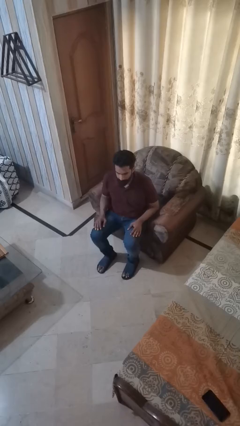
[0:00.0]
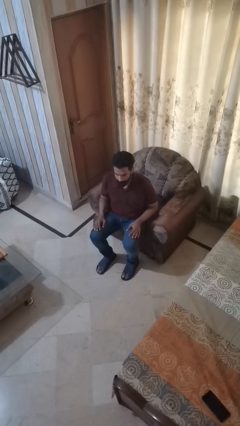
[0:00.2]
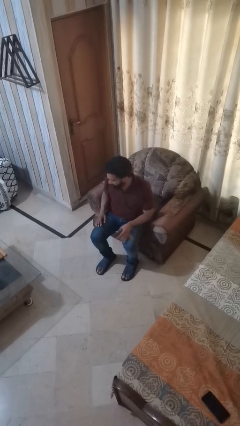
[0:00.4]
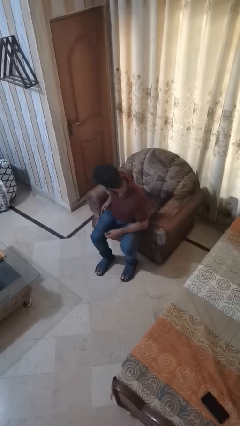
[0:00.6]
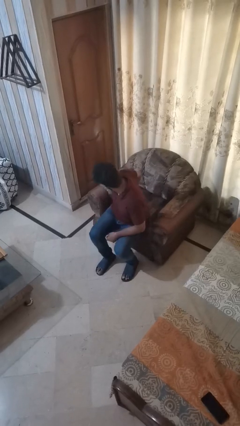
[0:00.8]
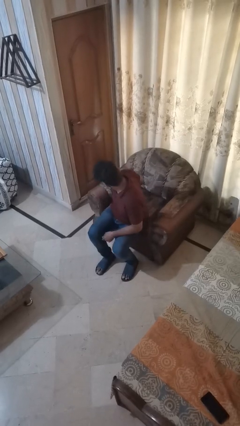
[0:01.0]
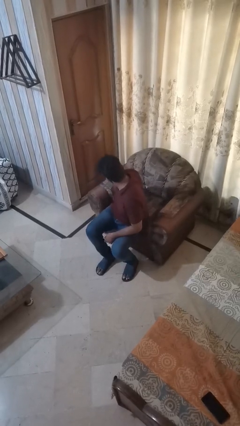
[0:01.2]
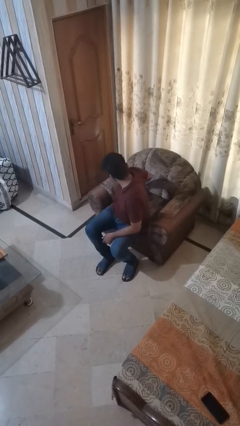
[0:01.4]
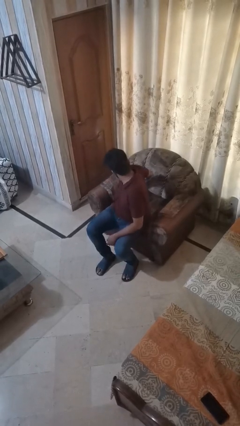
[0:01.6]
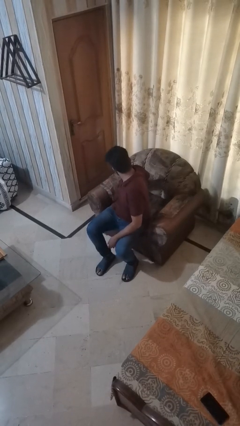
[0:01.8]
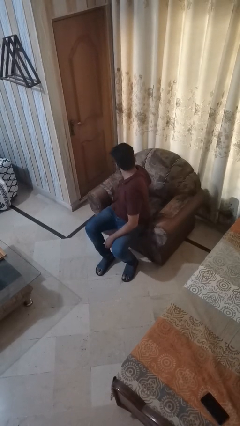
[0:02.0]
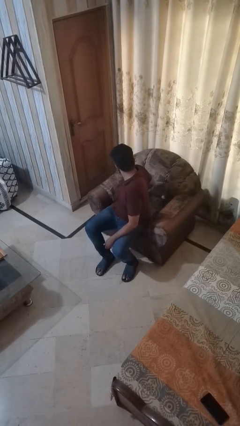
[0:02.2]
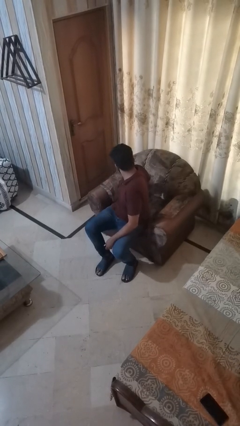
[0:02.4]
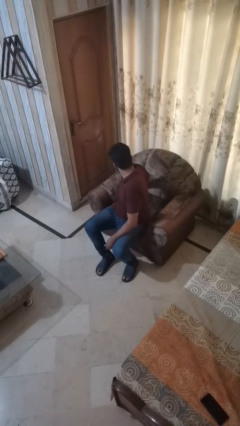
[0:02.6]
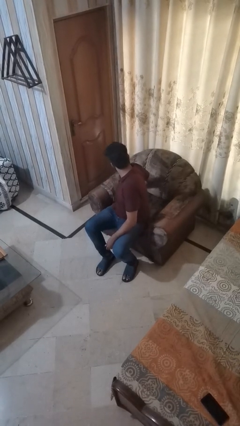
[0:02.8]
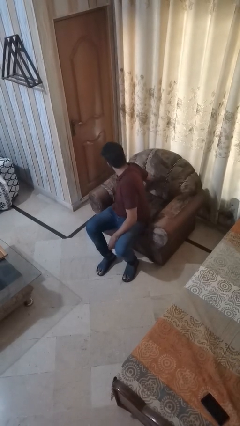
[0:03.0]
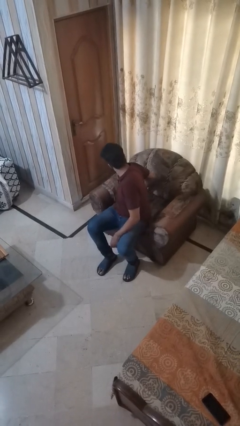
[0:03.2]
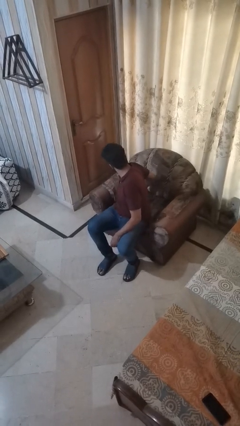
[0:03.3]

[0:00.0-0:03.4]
person searches under couch

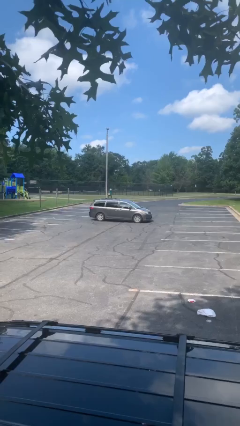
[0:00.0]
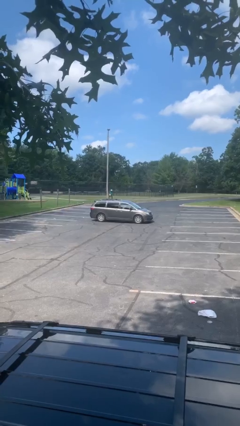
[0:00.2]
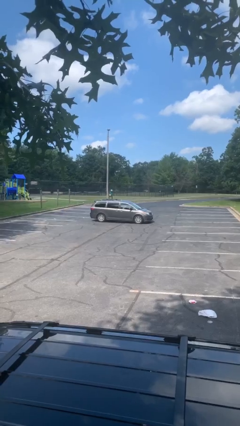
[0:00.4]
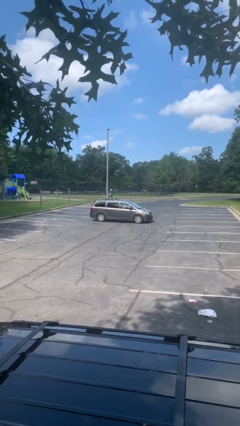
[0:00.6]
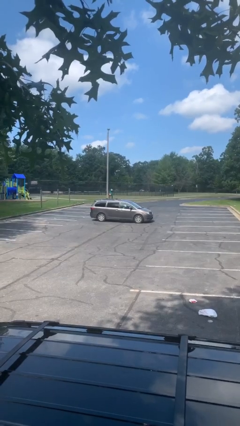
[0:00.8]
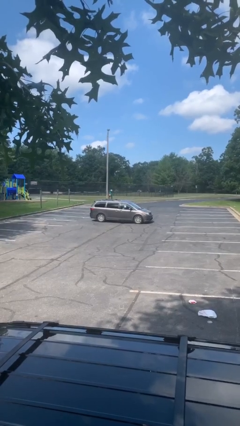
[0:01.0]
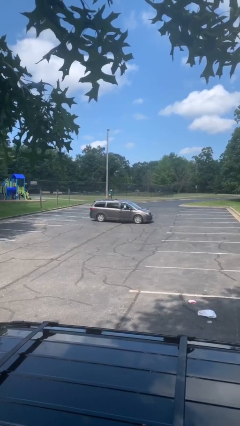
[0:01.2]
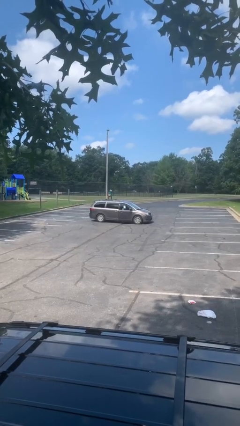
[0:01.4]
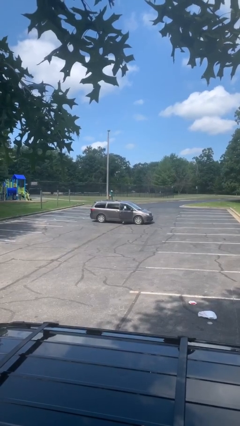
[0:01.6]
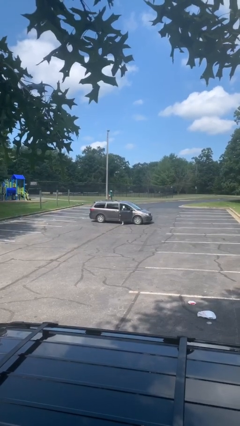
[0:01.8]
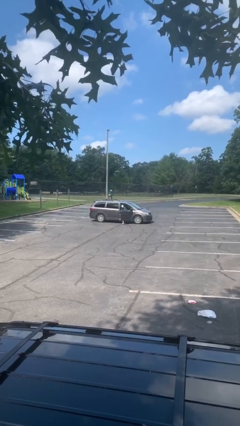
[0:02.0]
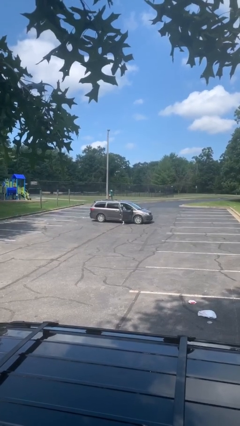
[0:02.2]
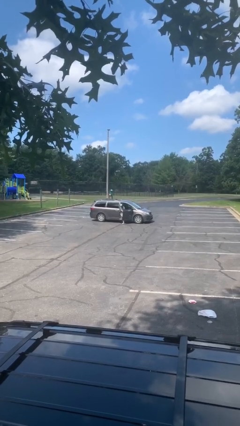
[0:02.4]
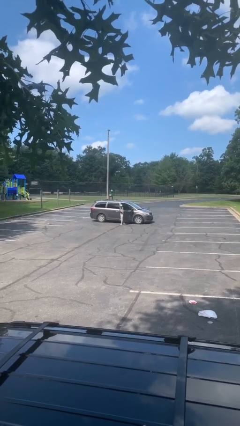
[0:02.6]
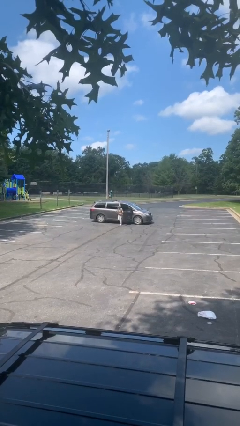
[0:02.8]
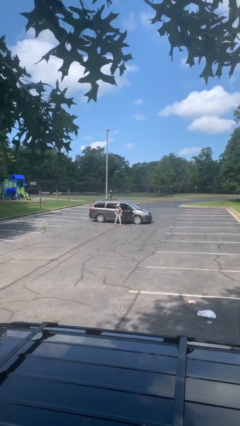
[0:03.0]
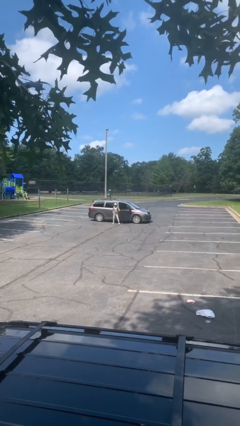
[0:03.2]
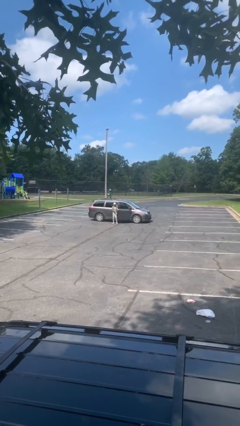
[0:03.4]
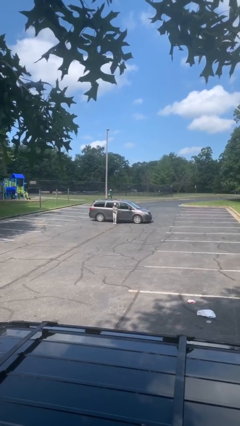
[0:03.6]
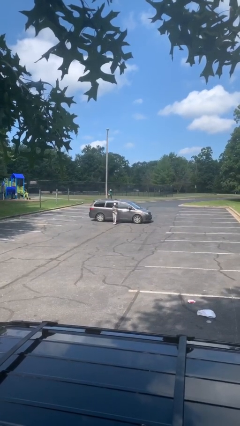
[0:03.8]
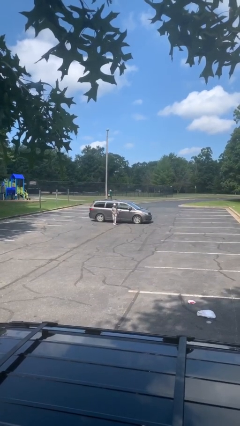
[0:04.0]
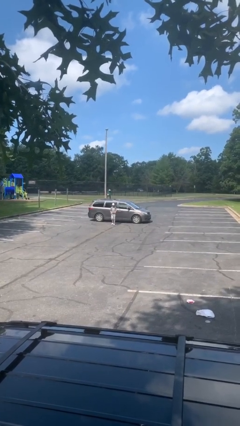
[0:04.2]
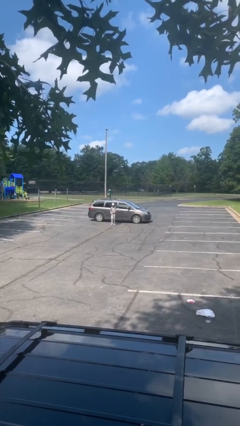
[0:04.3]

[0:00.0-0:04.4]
car drops off person

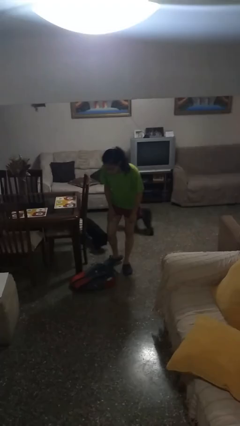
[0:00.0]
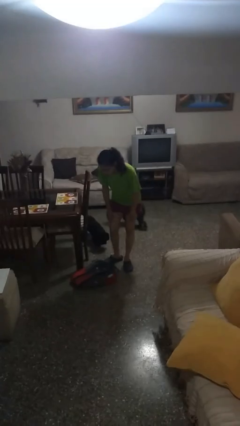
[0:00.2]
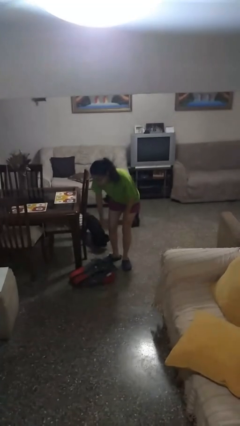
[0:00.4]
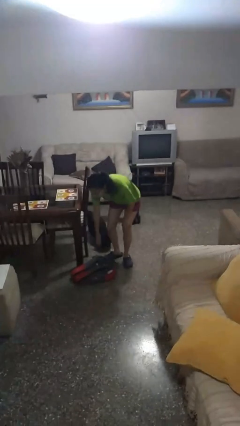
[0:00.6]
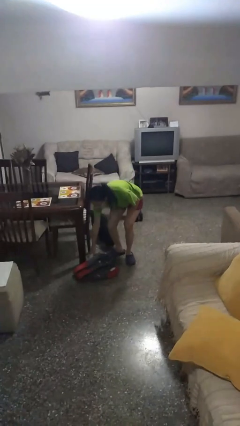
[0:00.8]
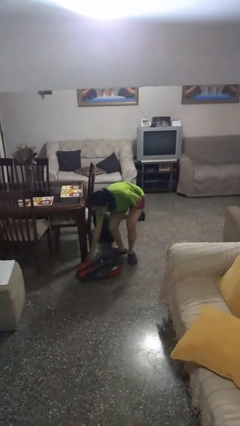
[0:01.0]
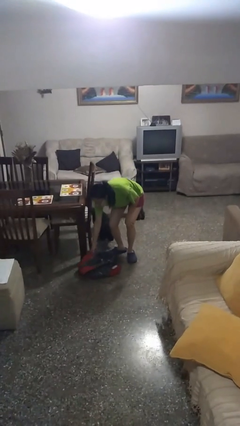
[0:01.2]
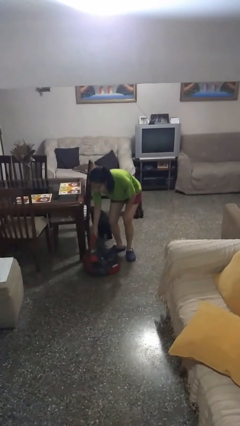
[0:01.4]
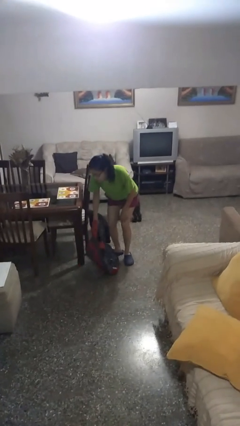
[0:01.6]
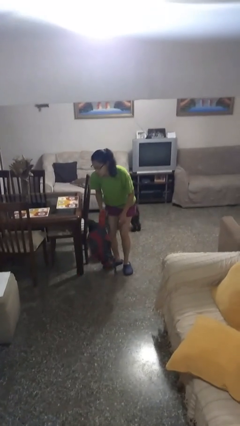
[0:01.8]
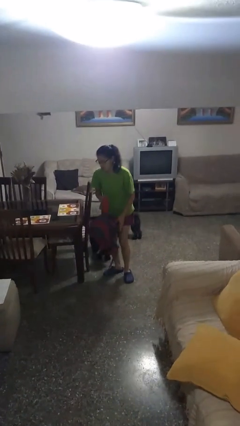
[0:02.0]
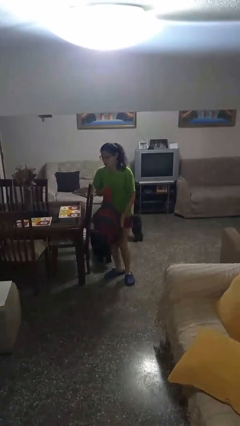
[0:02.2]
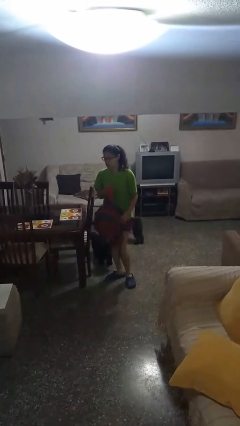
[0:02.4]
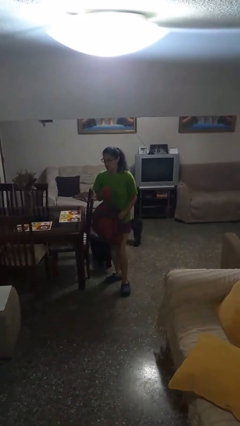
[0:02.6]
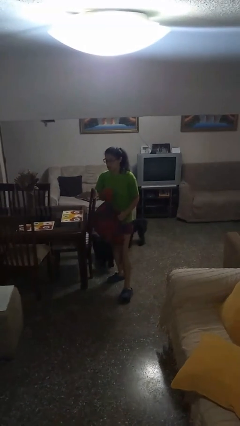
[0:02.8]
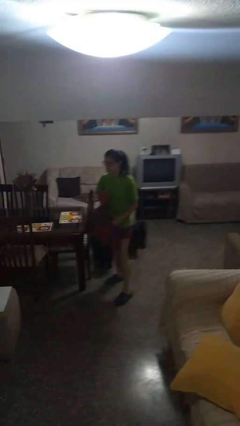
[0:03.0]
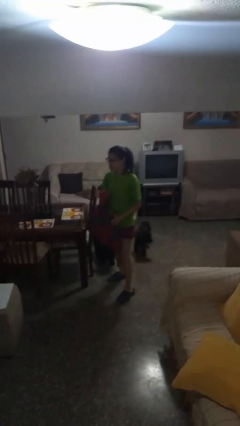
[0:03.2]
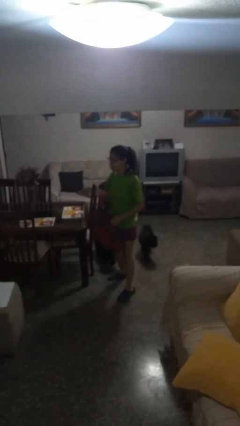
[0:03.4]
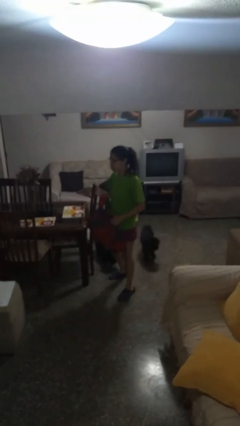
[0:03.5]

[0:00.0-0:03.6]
person picks up object from floor

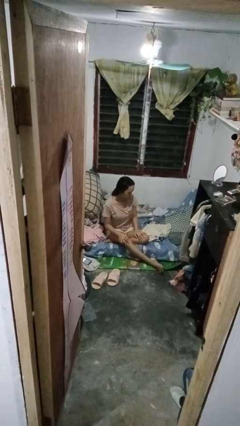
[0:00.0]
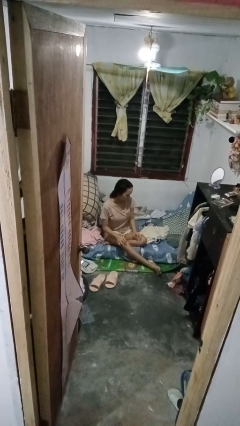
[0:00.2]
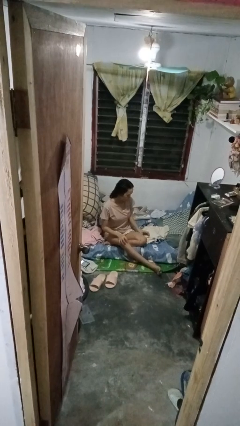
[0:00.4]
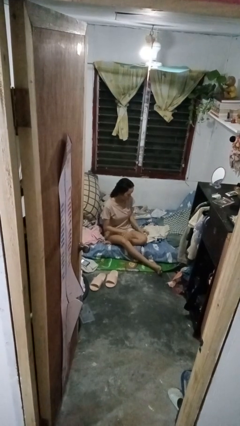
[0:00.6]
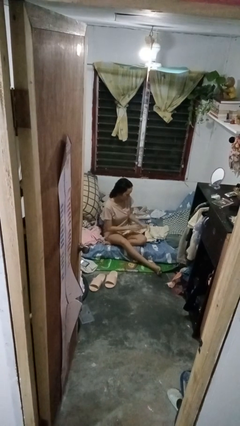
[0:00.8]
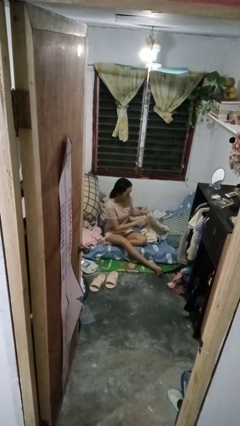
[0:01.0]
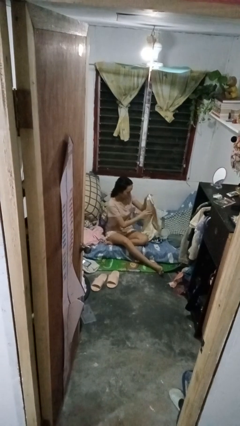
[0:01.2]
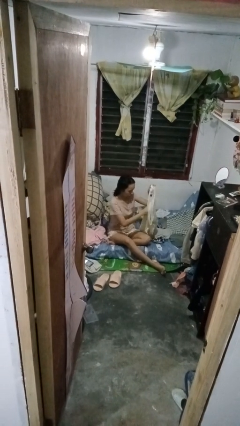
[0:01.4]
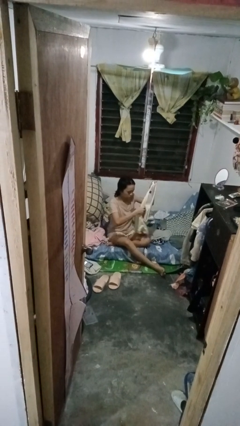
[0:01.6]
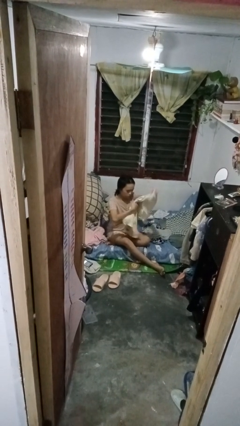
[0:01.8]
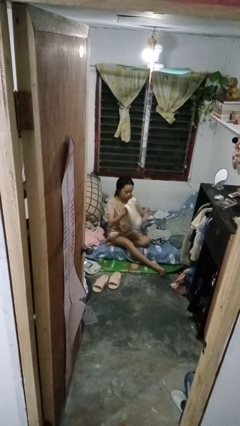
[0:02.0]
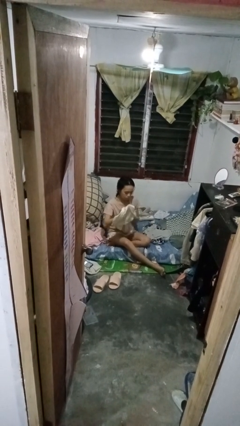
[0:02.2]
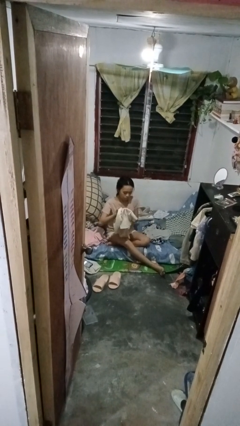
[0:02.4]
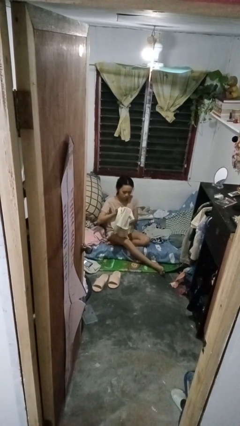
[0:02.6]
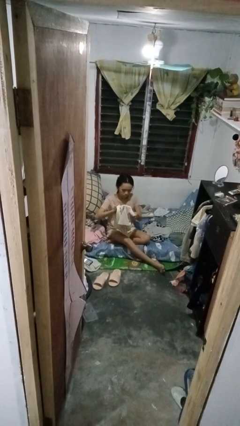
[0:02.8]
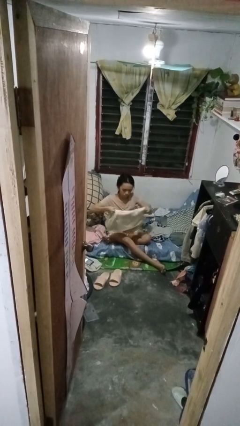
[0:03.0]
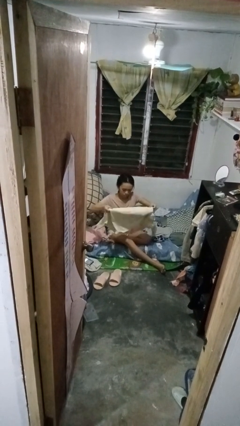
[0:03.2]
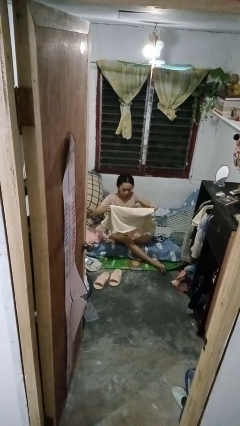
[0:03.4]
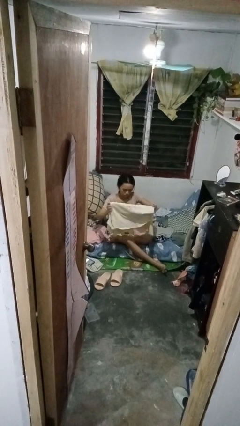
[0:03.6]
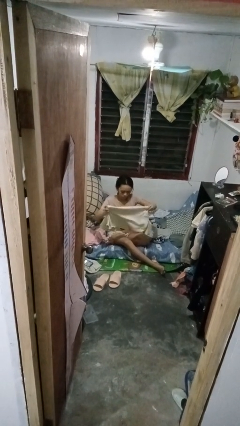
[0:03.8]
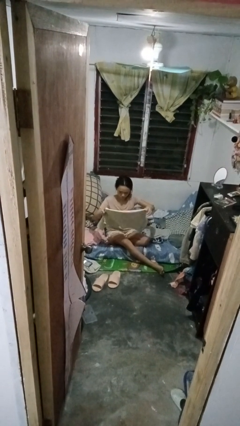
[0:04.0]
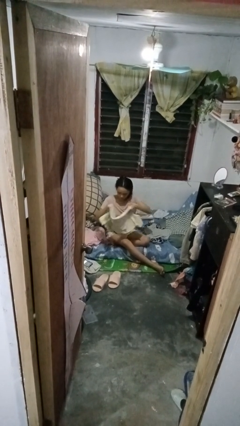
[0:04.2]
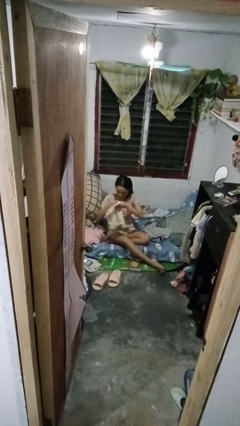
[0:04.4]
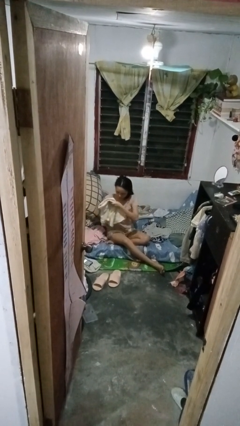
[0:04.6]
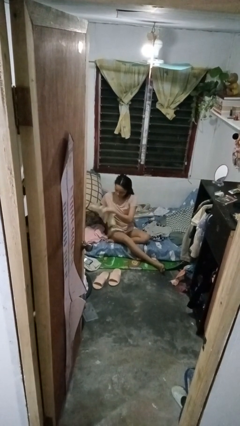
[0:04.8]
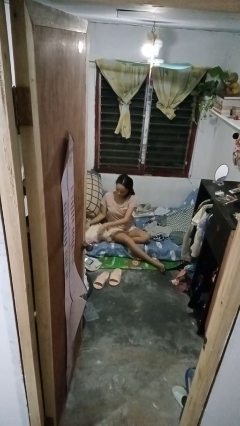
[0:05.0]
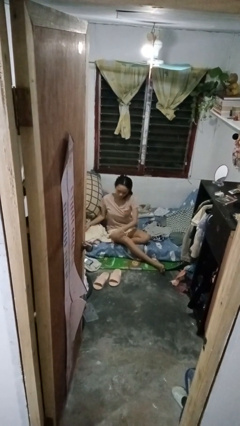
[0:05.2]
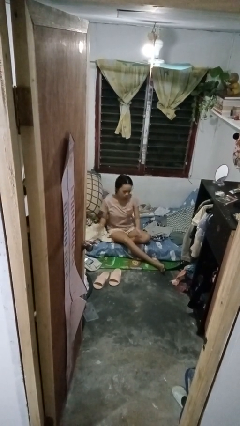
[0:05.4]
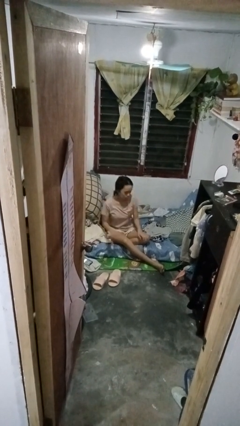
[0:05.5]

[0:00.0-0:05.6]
person folds shirt

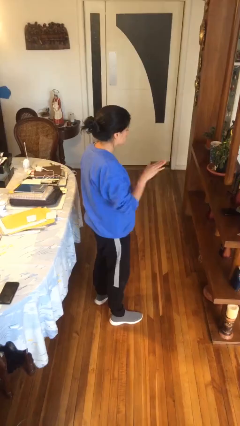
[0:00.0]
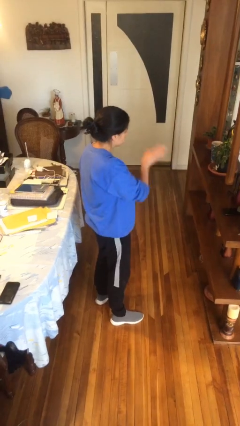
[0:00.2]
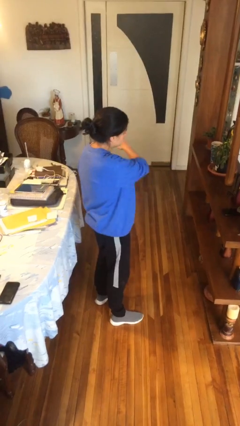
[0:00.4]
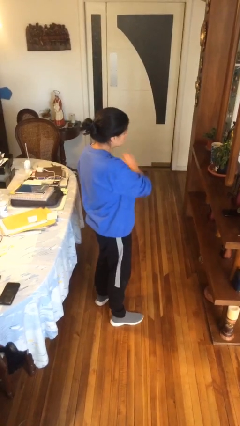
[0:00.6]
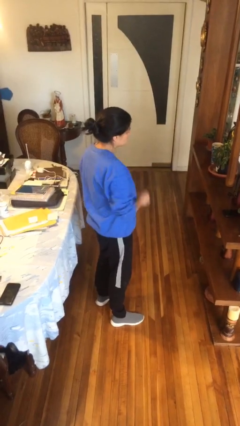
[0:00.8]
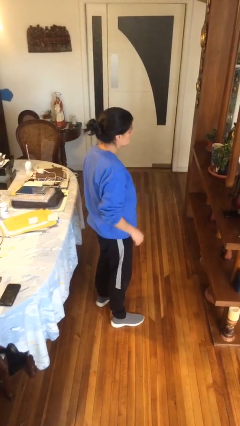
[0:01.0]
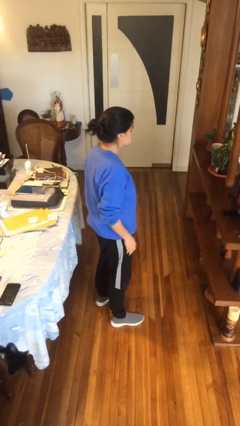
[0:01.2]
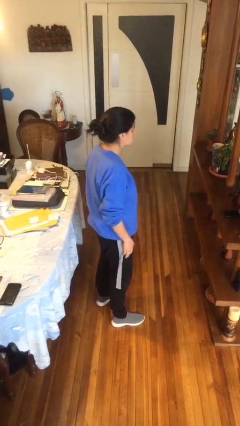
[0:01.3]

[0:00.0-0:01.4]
person gestures swipe left
